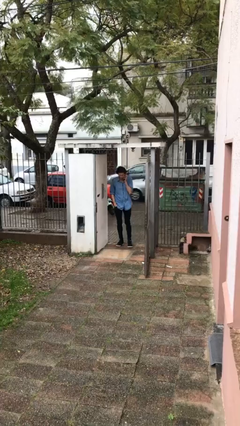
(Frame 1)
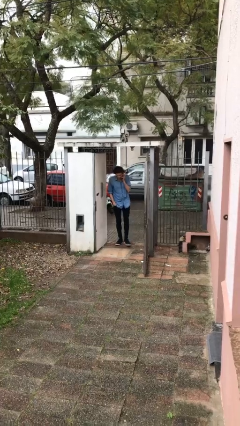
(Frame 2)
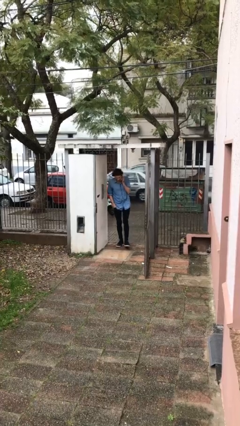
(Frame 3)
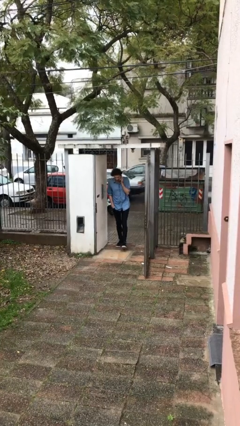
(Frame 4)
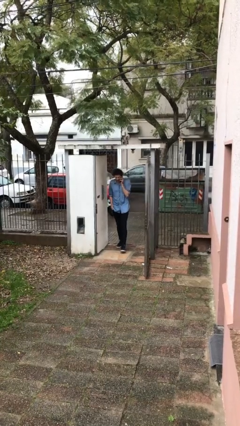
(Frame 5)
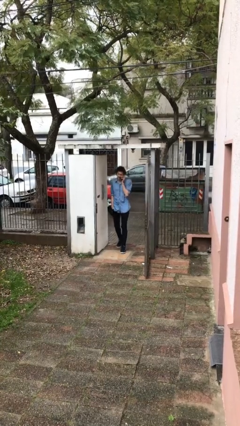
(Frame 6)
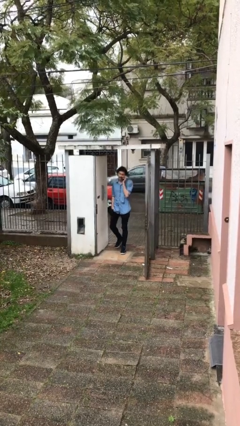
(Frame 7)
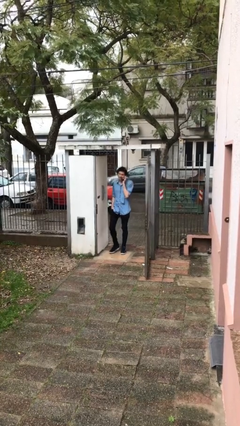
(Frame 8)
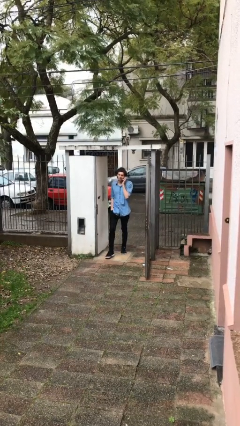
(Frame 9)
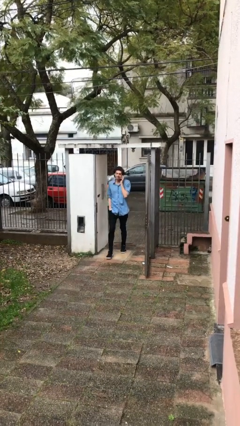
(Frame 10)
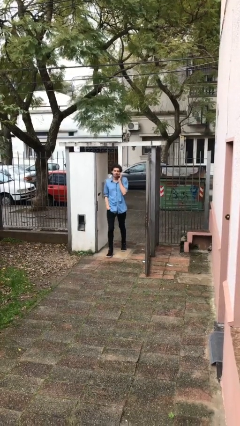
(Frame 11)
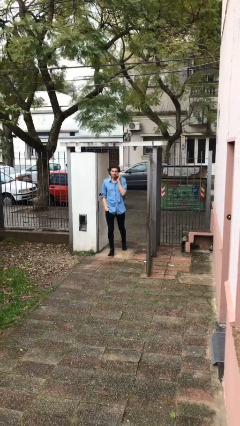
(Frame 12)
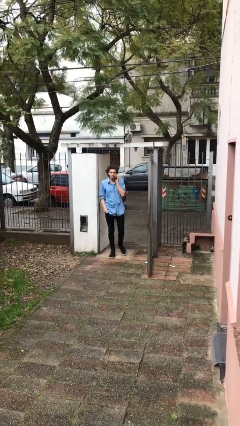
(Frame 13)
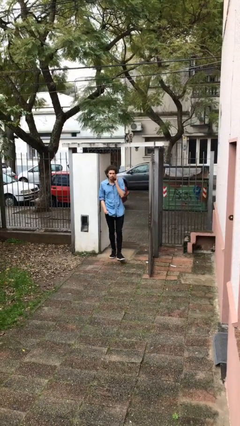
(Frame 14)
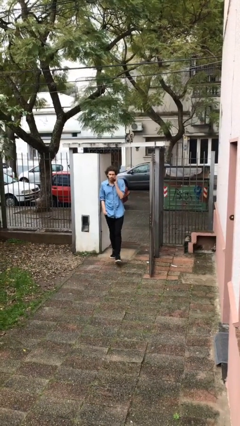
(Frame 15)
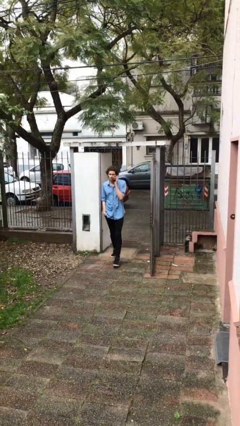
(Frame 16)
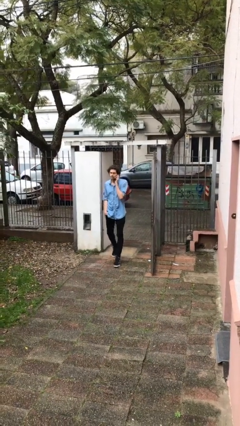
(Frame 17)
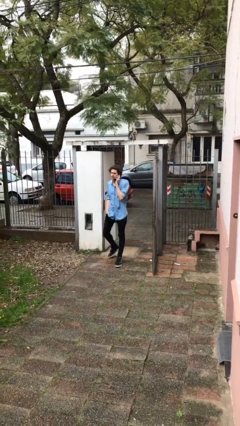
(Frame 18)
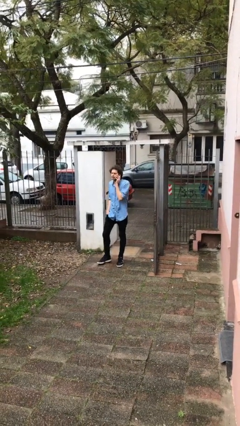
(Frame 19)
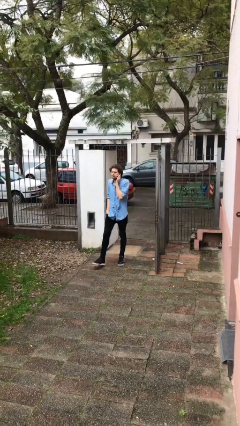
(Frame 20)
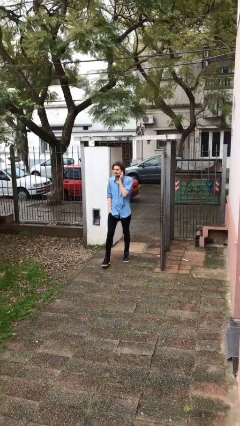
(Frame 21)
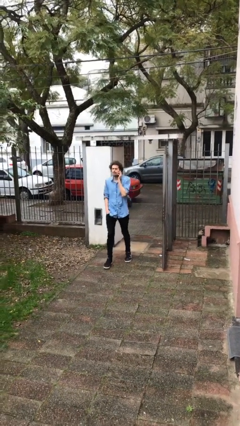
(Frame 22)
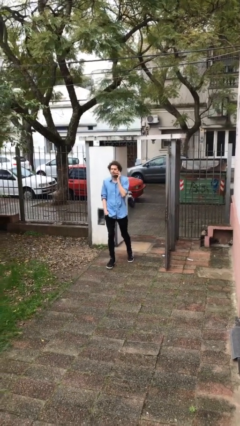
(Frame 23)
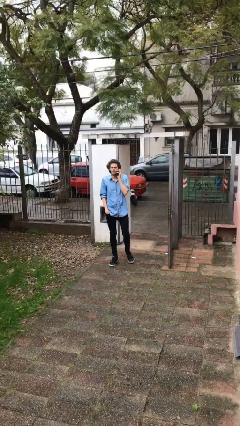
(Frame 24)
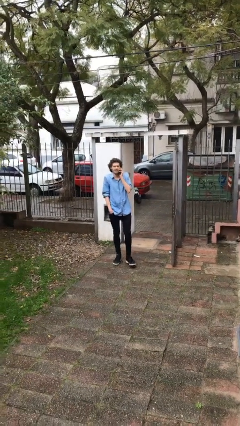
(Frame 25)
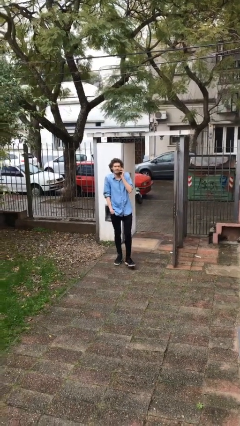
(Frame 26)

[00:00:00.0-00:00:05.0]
person enters scene through structure

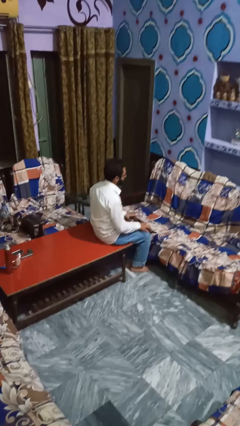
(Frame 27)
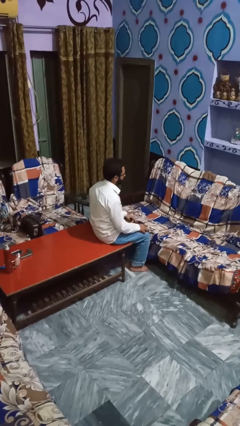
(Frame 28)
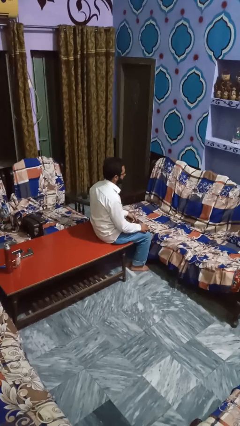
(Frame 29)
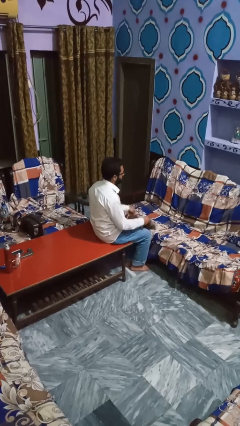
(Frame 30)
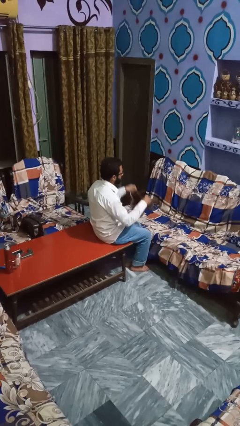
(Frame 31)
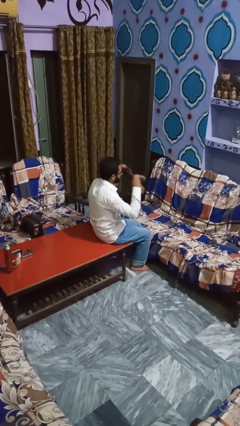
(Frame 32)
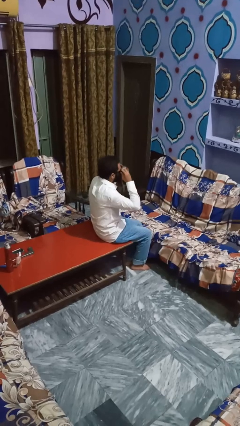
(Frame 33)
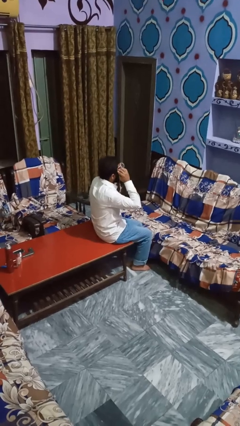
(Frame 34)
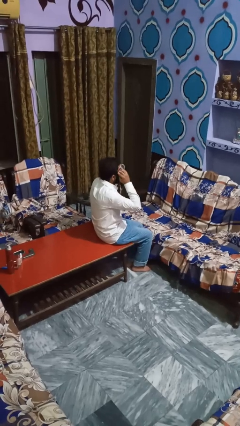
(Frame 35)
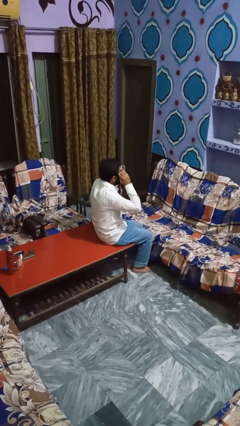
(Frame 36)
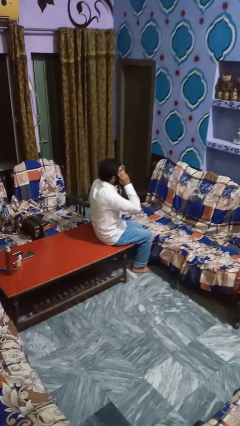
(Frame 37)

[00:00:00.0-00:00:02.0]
person yawns

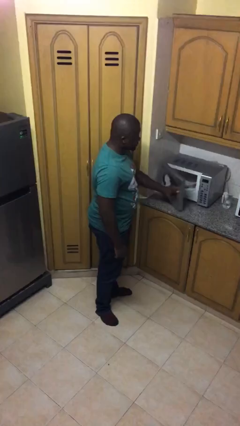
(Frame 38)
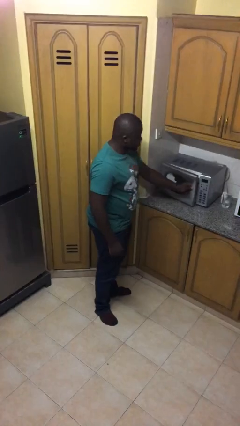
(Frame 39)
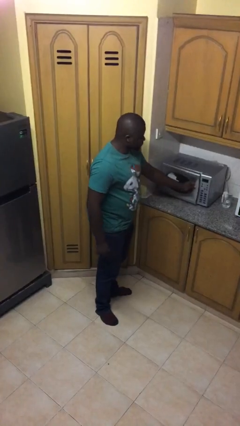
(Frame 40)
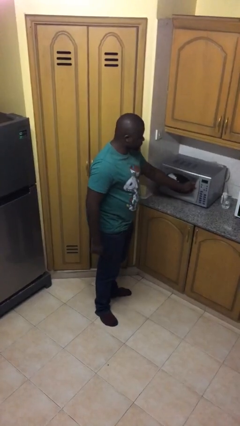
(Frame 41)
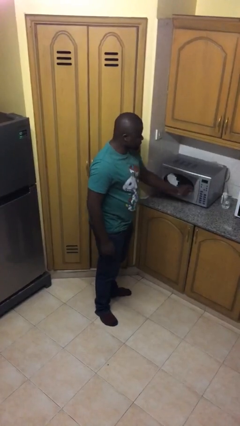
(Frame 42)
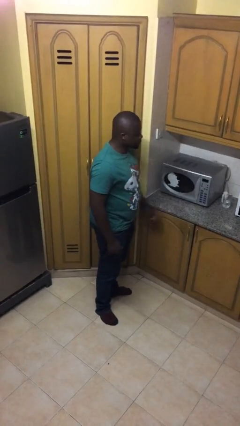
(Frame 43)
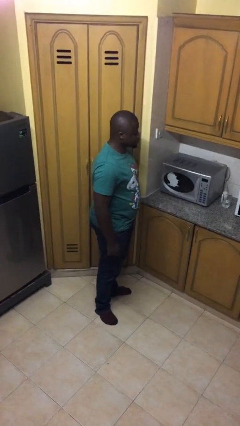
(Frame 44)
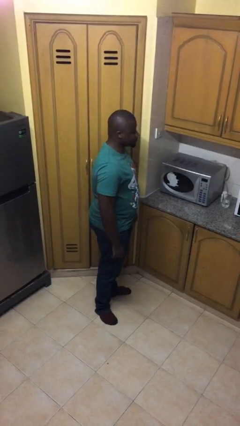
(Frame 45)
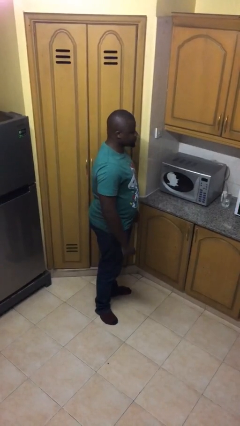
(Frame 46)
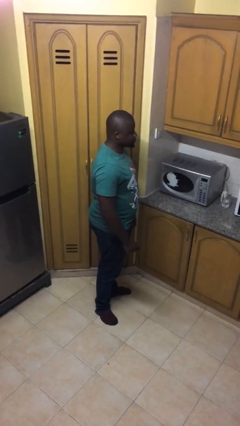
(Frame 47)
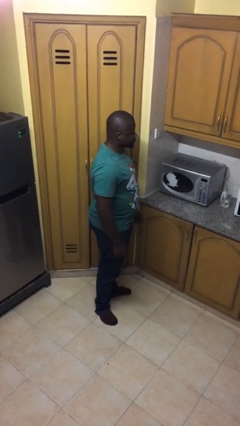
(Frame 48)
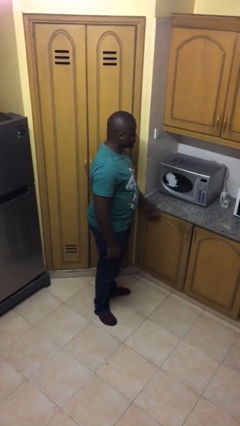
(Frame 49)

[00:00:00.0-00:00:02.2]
person closes microwave

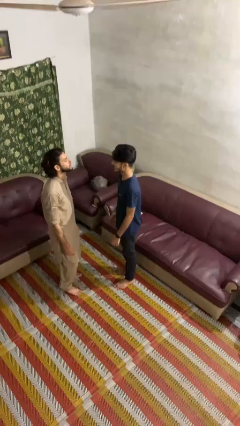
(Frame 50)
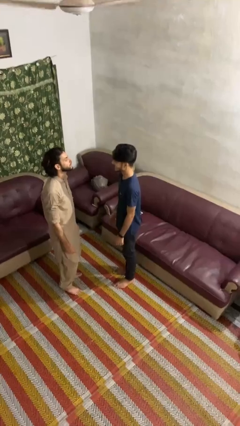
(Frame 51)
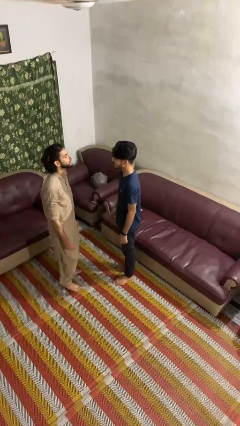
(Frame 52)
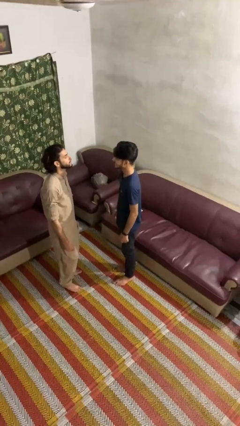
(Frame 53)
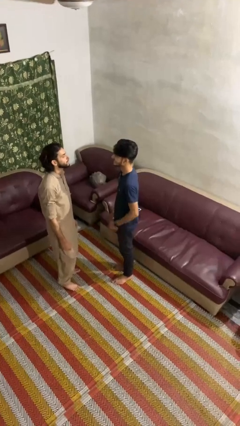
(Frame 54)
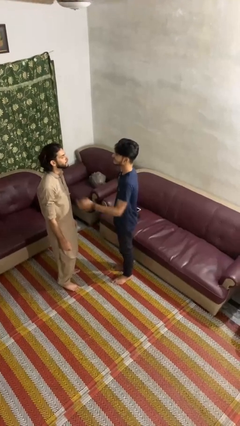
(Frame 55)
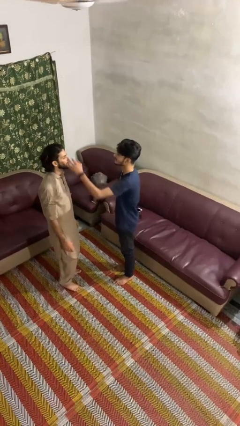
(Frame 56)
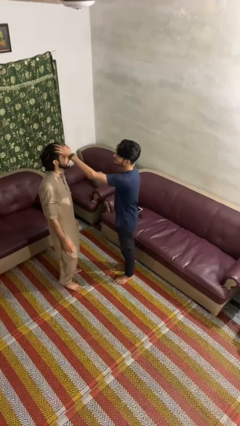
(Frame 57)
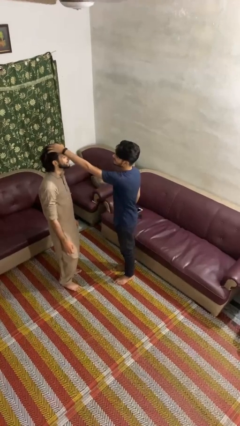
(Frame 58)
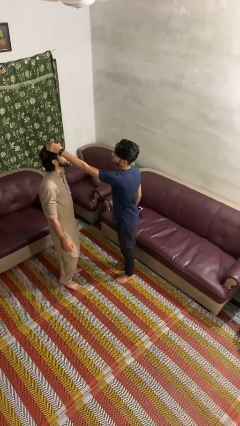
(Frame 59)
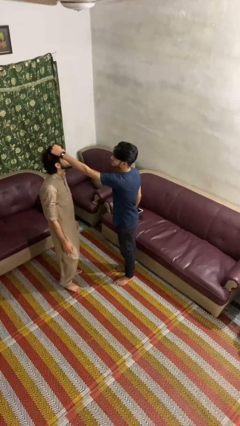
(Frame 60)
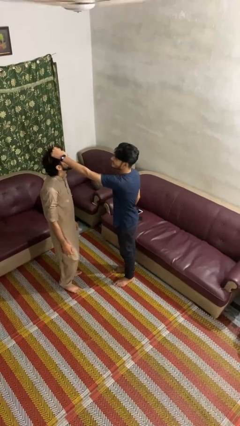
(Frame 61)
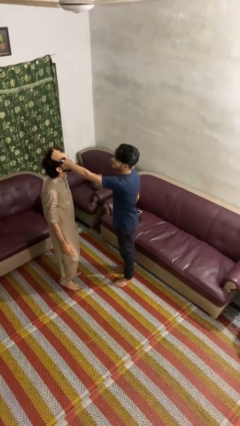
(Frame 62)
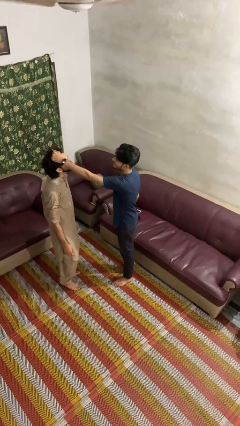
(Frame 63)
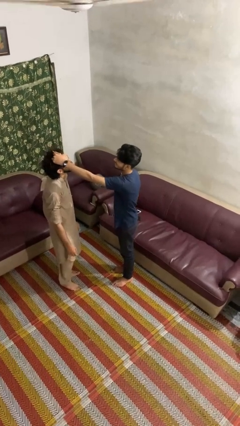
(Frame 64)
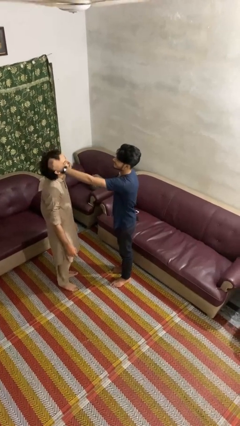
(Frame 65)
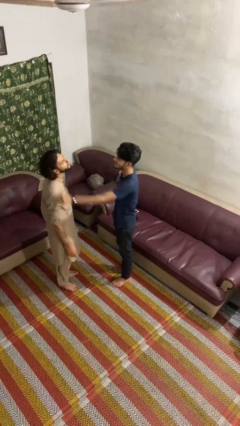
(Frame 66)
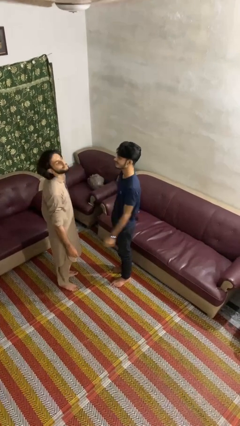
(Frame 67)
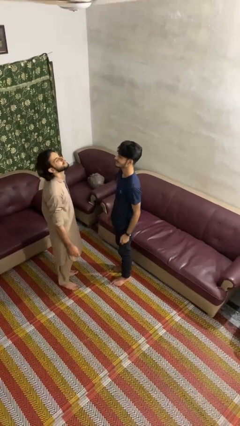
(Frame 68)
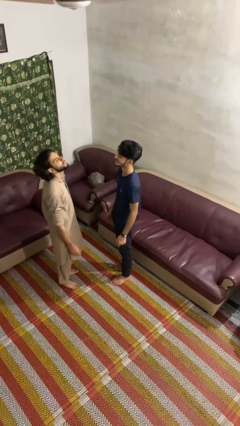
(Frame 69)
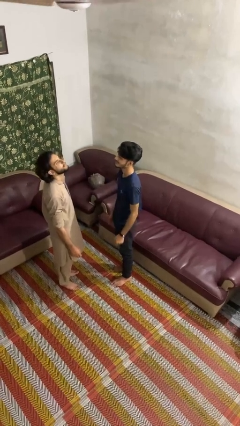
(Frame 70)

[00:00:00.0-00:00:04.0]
person grabs person by hair

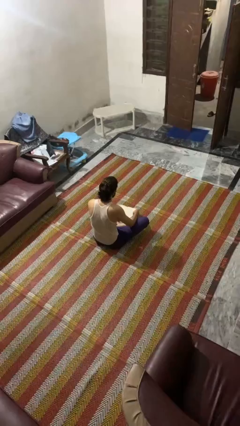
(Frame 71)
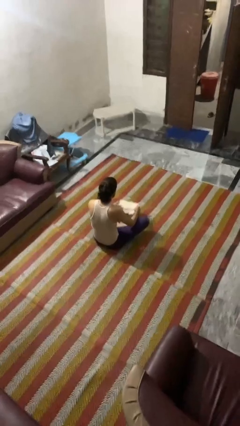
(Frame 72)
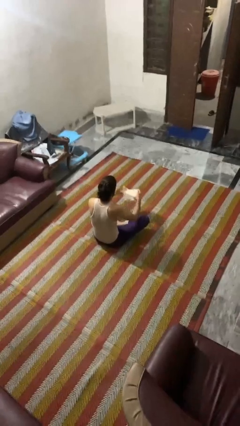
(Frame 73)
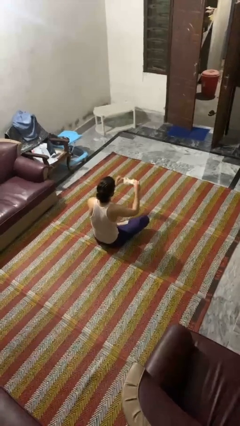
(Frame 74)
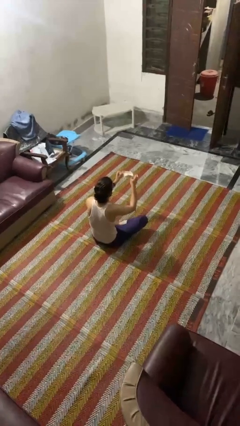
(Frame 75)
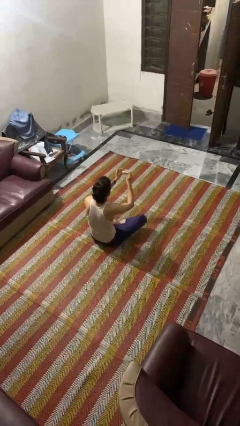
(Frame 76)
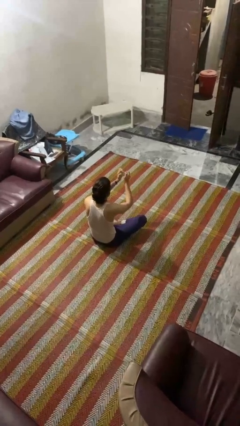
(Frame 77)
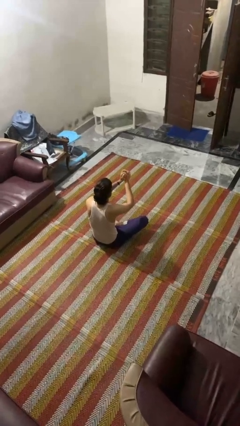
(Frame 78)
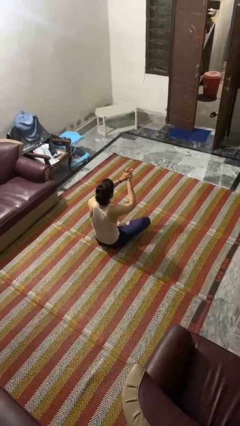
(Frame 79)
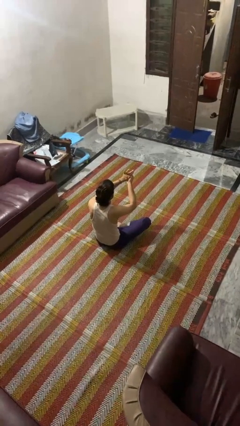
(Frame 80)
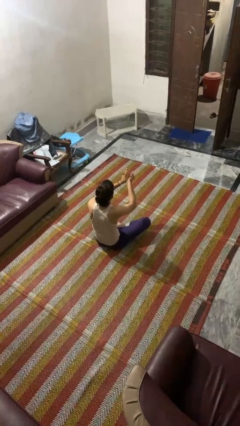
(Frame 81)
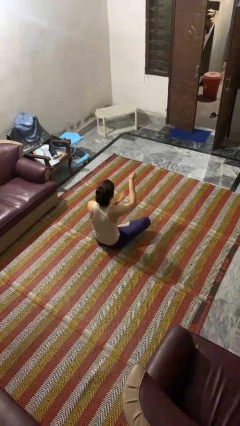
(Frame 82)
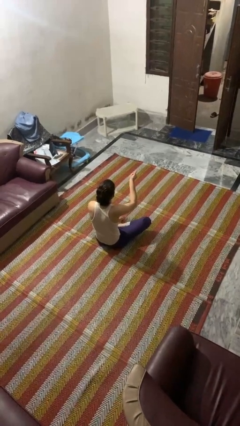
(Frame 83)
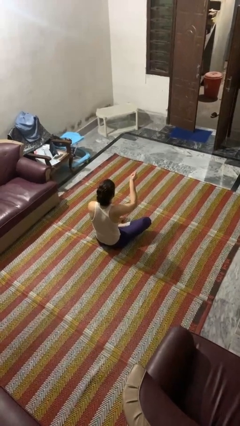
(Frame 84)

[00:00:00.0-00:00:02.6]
person crumples paper

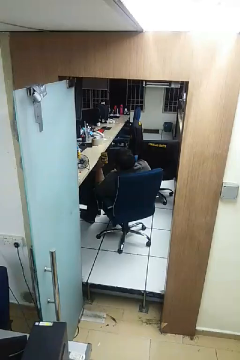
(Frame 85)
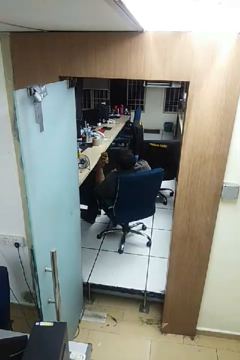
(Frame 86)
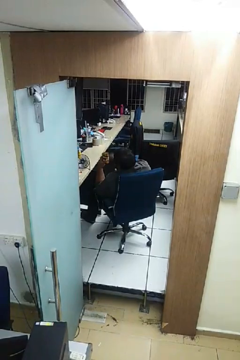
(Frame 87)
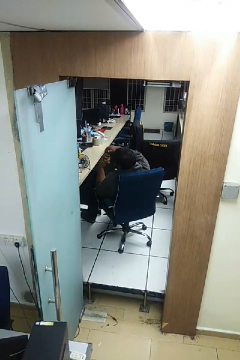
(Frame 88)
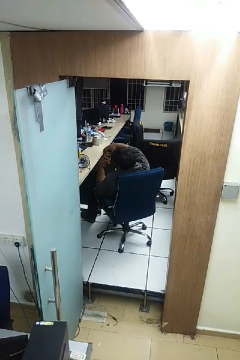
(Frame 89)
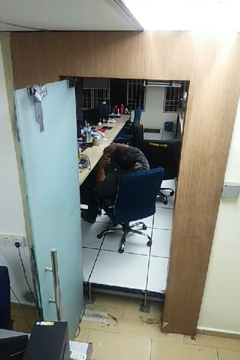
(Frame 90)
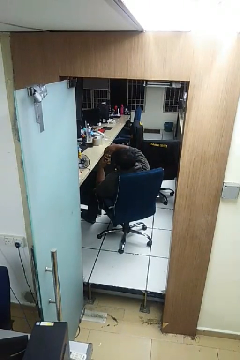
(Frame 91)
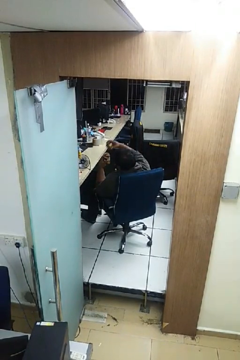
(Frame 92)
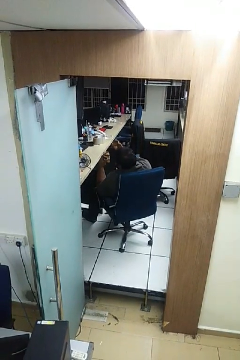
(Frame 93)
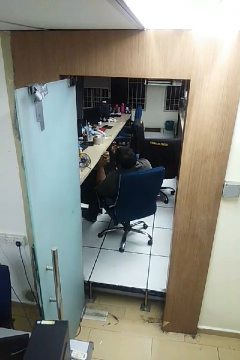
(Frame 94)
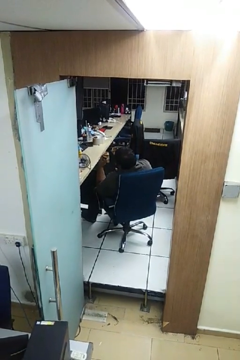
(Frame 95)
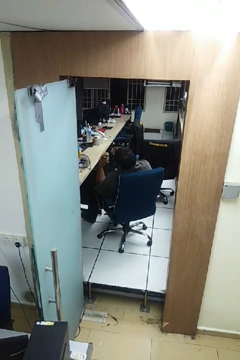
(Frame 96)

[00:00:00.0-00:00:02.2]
person opens jar
